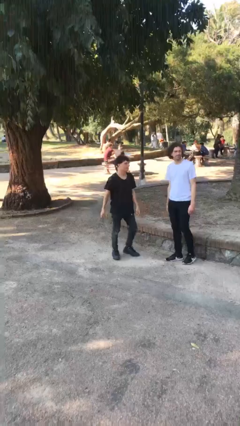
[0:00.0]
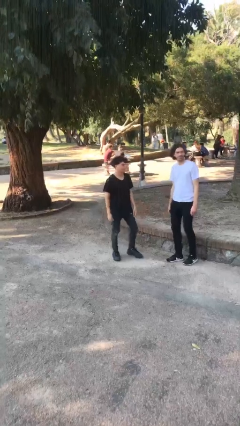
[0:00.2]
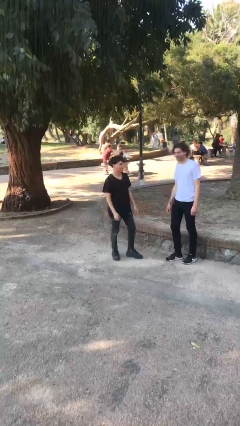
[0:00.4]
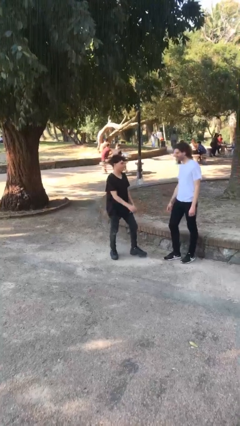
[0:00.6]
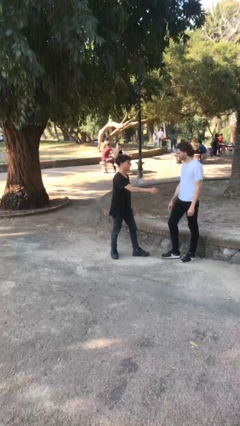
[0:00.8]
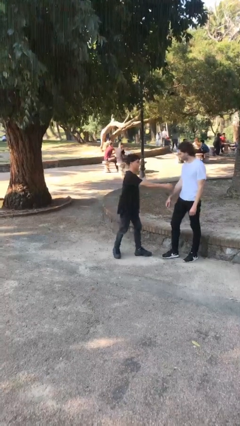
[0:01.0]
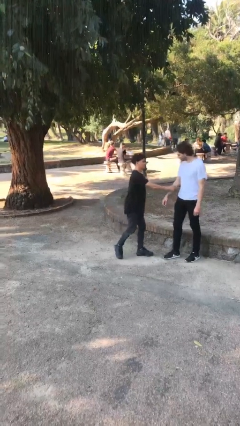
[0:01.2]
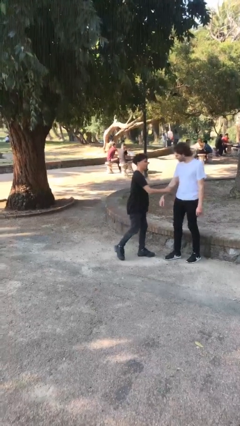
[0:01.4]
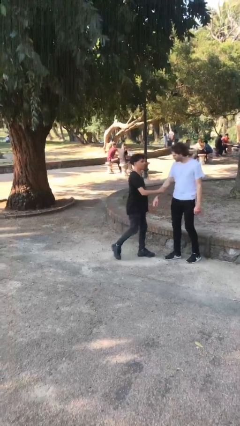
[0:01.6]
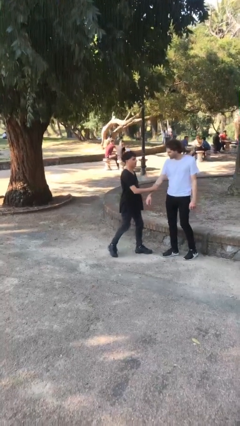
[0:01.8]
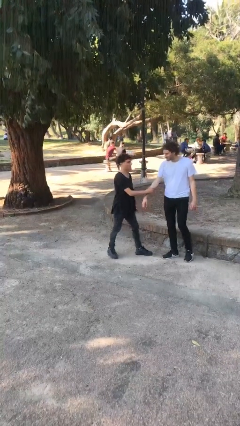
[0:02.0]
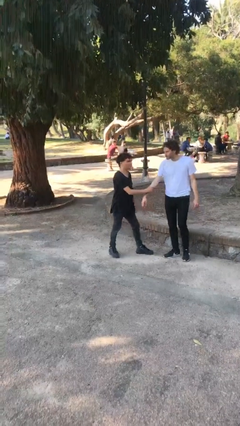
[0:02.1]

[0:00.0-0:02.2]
person grabs person by forearm

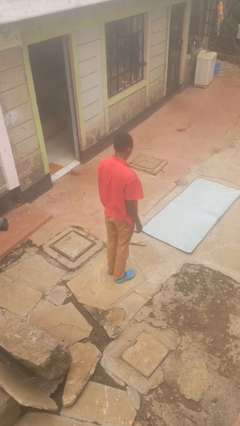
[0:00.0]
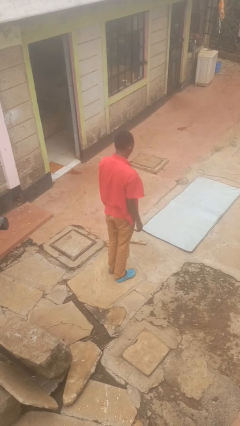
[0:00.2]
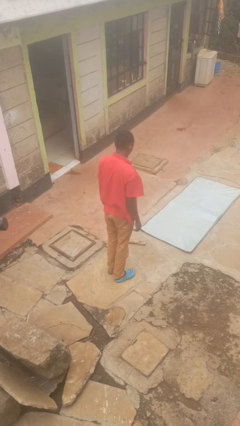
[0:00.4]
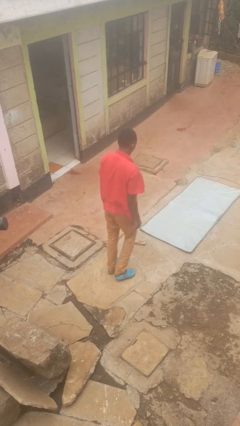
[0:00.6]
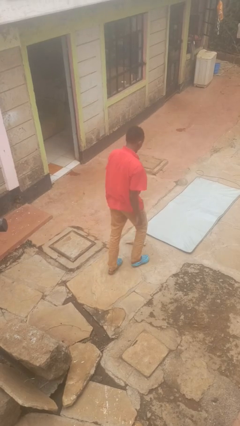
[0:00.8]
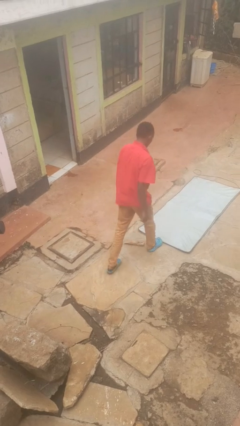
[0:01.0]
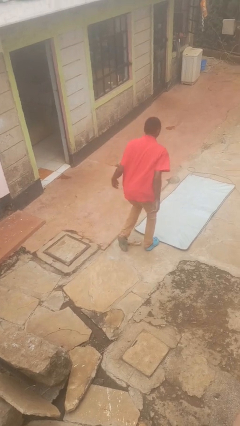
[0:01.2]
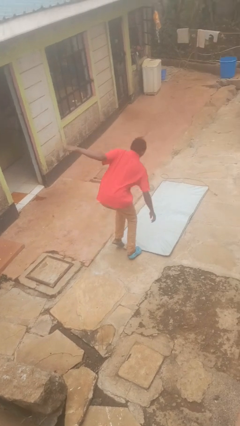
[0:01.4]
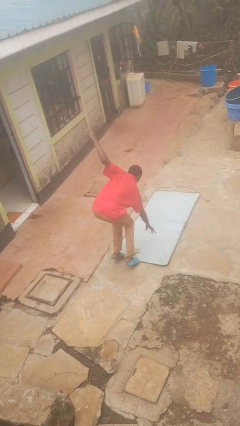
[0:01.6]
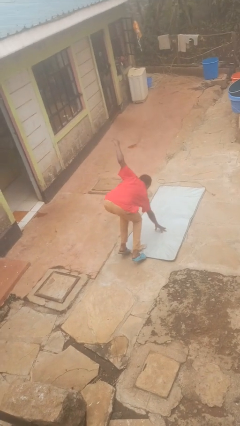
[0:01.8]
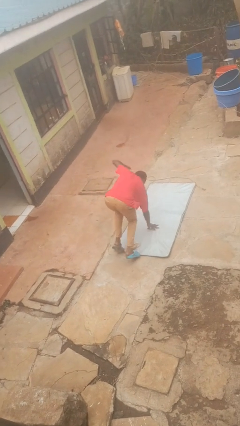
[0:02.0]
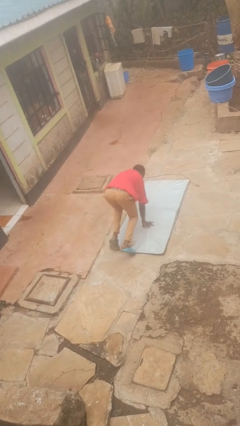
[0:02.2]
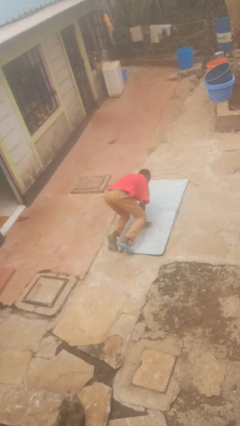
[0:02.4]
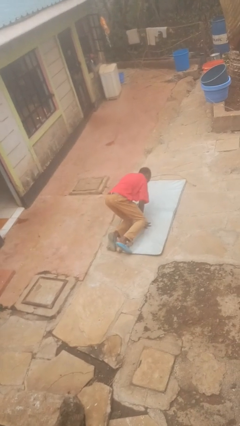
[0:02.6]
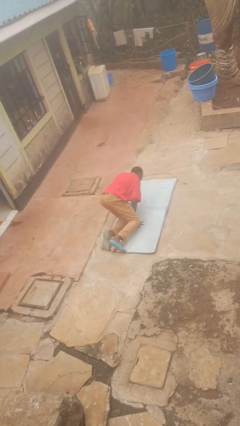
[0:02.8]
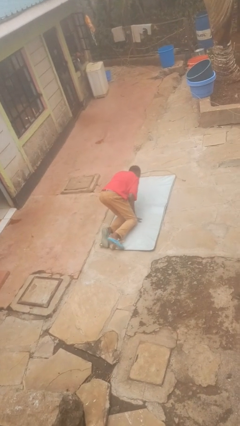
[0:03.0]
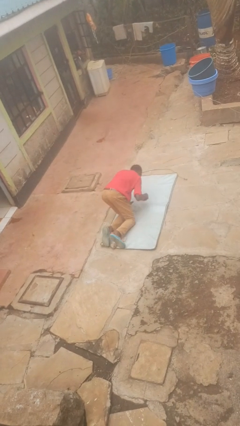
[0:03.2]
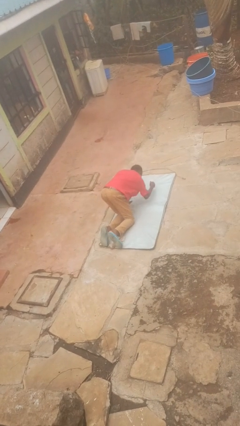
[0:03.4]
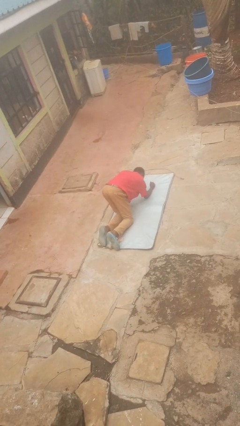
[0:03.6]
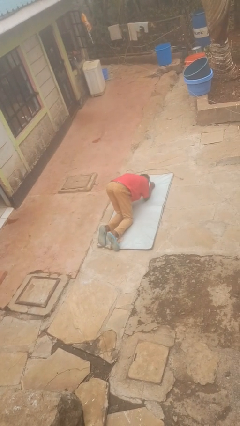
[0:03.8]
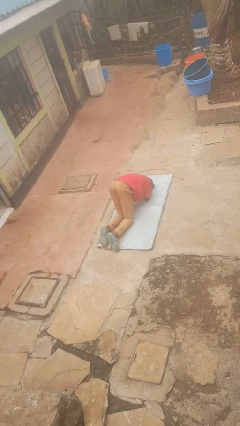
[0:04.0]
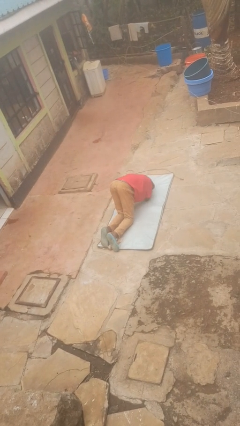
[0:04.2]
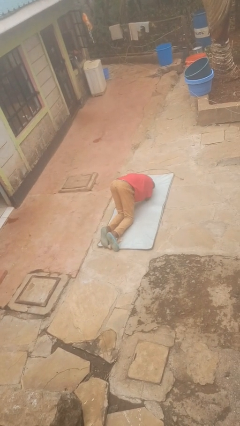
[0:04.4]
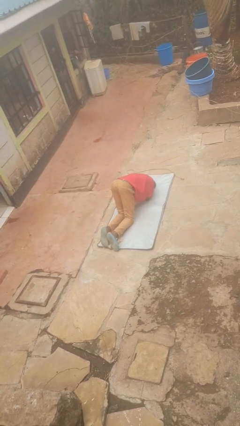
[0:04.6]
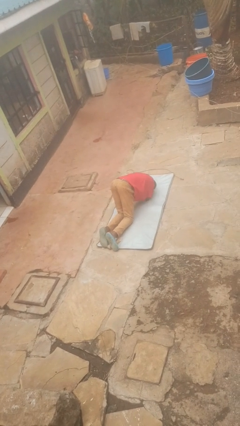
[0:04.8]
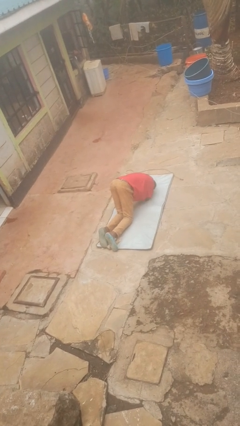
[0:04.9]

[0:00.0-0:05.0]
person trips on object on floor

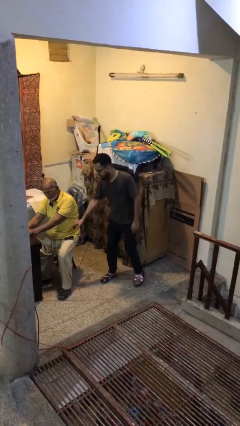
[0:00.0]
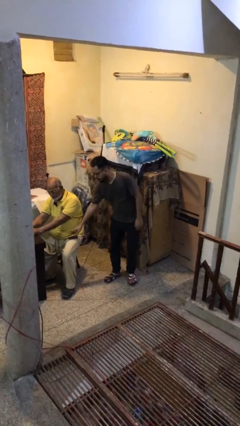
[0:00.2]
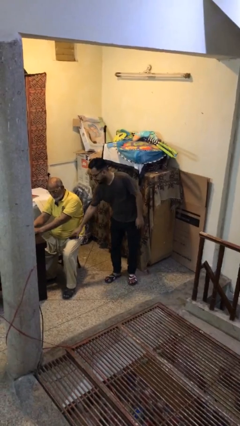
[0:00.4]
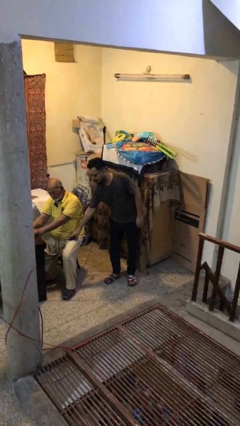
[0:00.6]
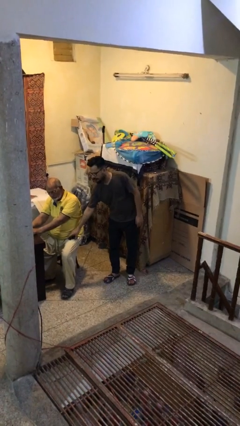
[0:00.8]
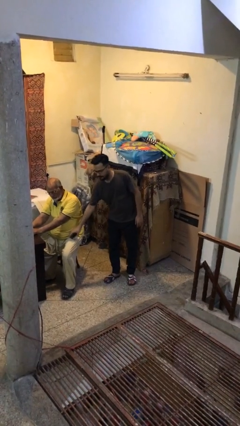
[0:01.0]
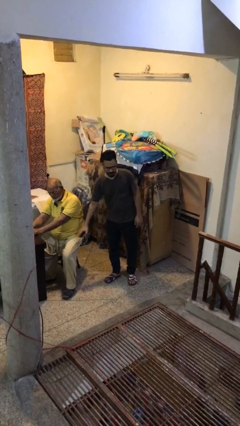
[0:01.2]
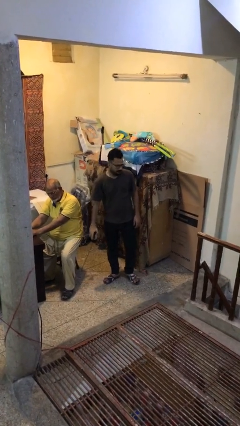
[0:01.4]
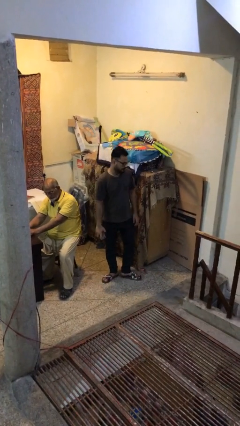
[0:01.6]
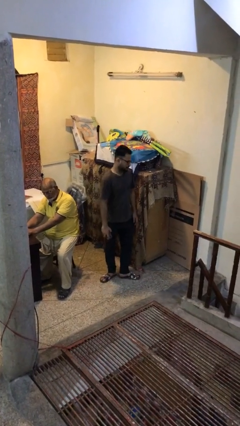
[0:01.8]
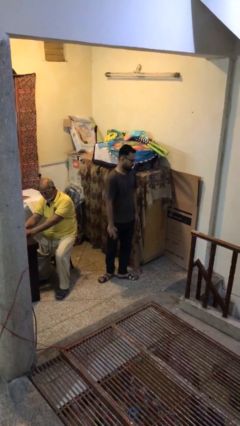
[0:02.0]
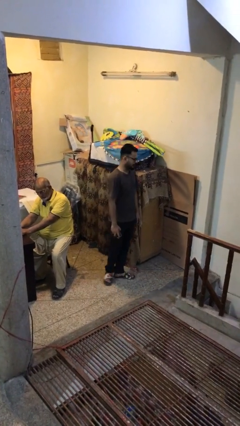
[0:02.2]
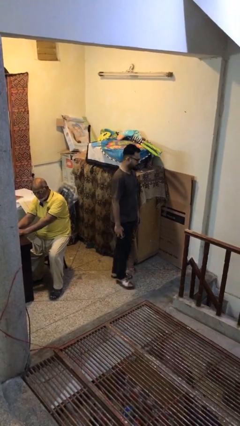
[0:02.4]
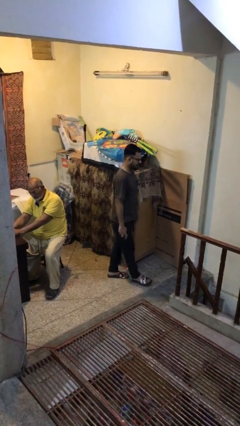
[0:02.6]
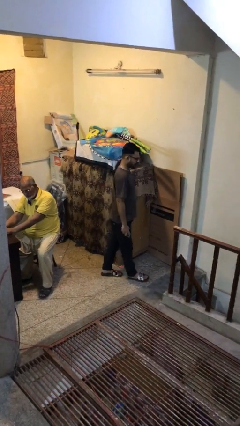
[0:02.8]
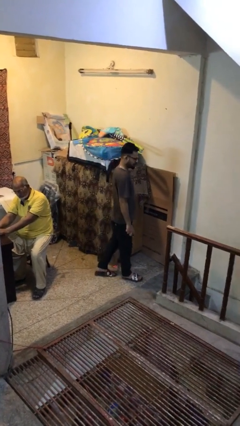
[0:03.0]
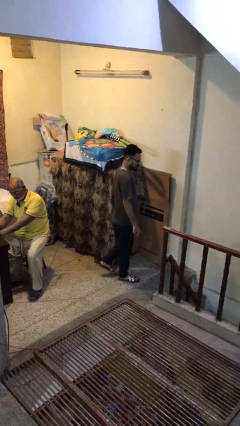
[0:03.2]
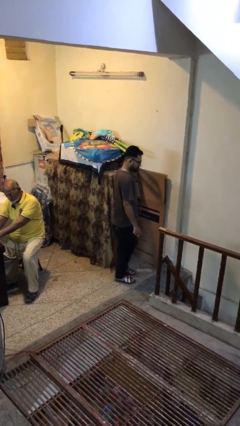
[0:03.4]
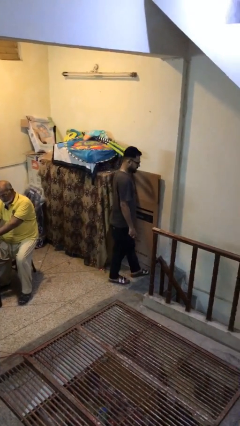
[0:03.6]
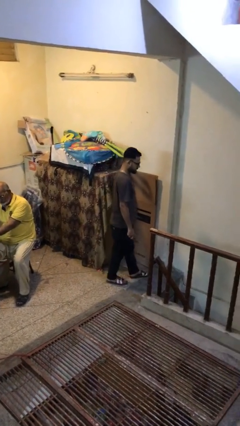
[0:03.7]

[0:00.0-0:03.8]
person steals object from person

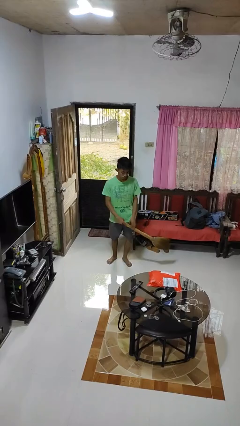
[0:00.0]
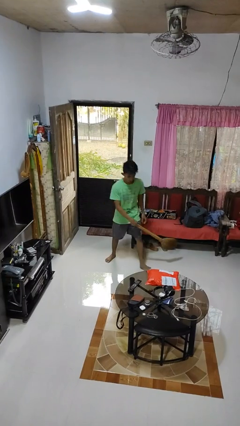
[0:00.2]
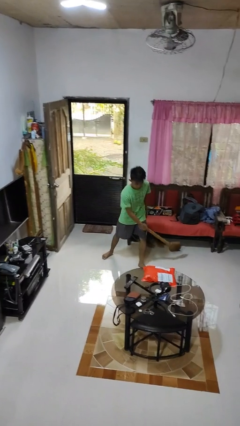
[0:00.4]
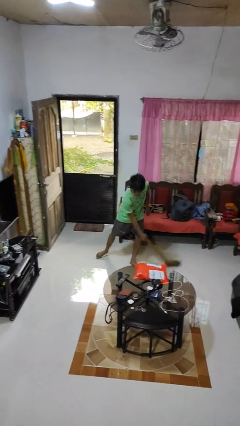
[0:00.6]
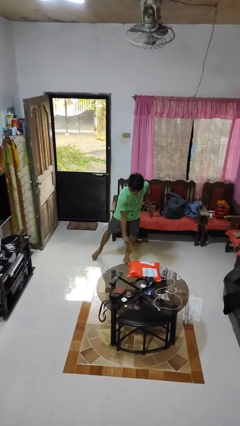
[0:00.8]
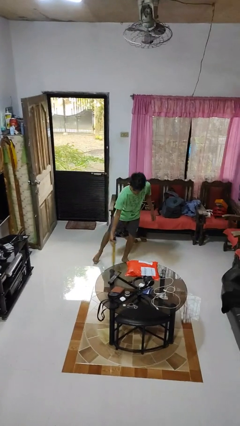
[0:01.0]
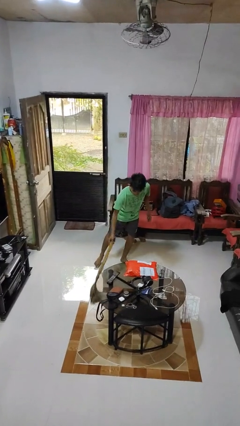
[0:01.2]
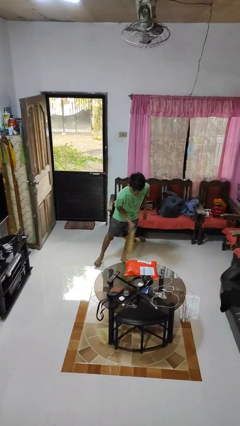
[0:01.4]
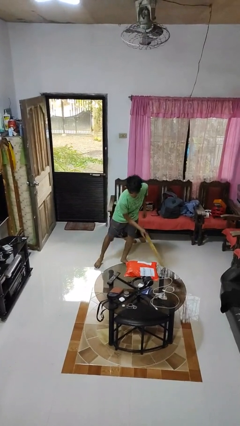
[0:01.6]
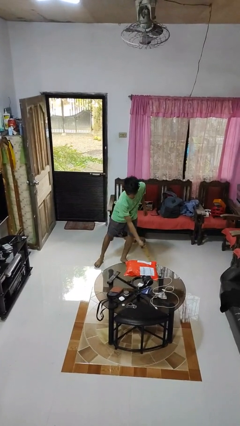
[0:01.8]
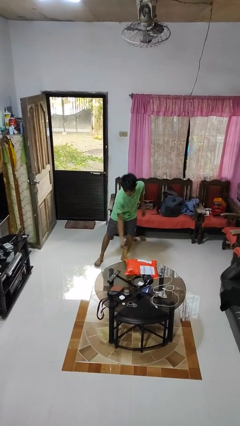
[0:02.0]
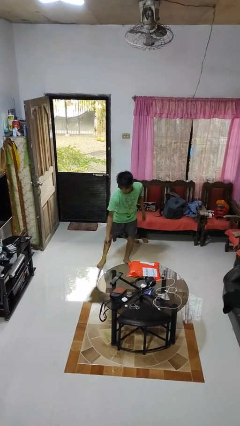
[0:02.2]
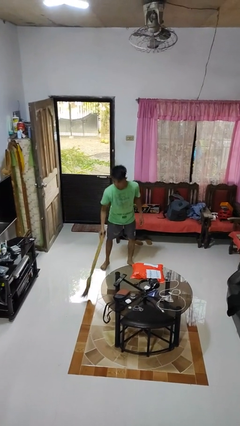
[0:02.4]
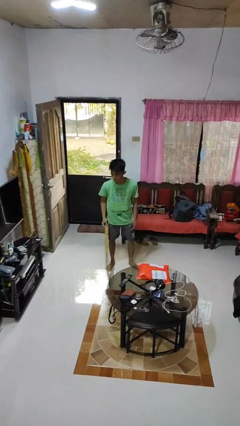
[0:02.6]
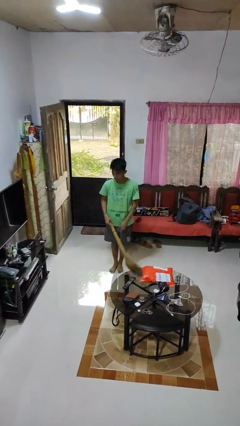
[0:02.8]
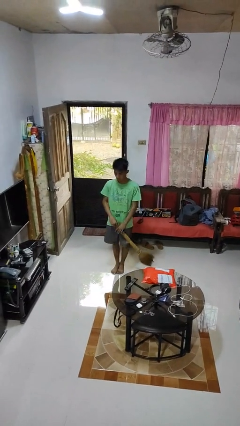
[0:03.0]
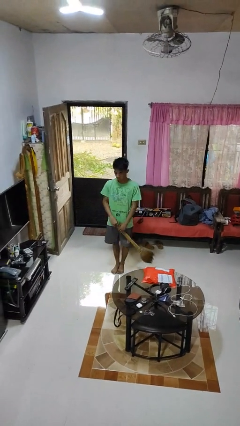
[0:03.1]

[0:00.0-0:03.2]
person sweeps floor

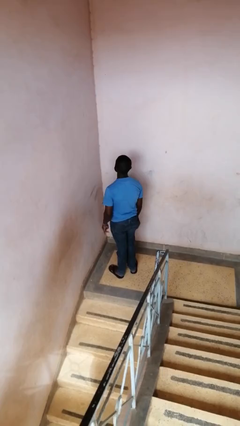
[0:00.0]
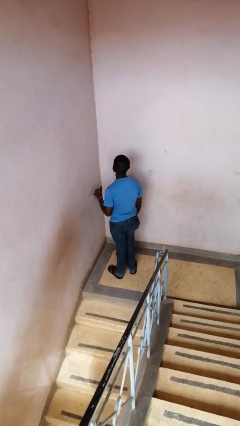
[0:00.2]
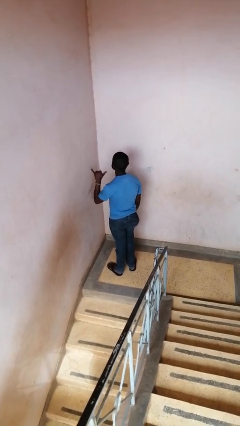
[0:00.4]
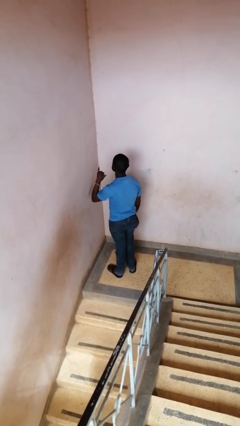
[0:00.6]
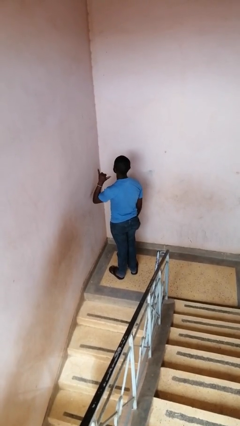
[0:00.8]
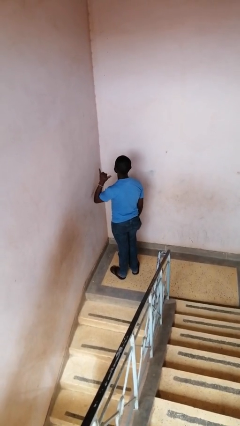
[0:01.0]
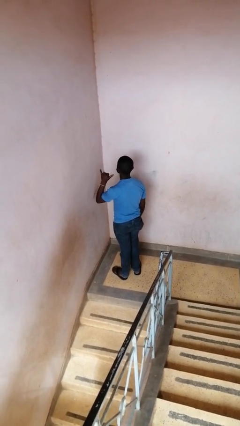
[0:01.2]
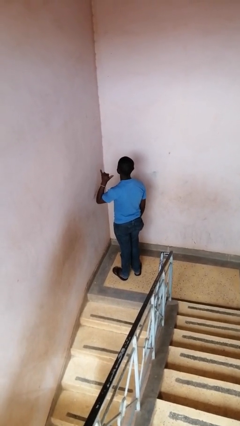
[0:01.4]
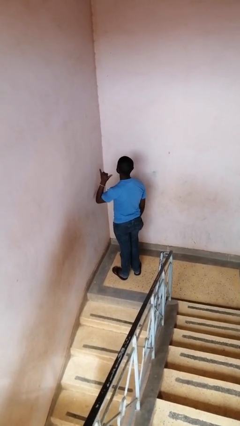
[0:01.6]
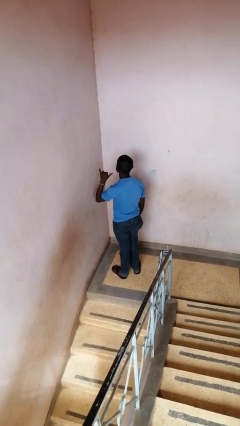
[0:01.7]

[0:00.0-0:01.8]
person gestures hang loose

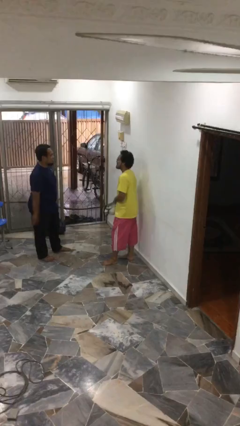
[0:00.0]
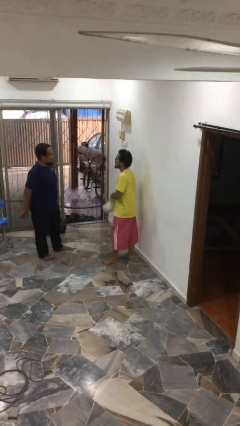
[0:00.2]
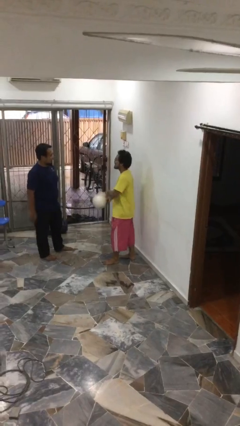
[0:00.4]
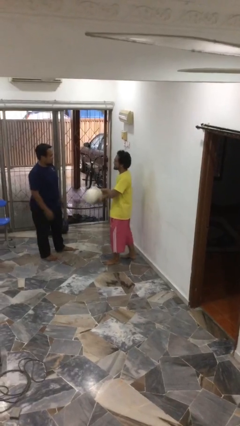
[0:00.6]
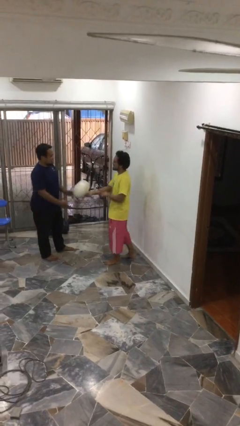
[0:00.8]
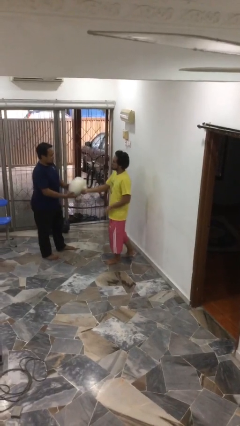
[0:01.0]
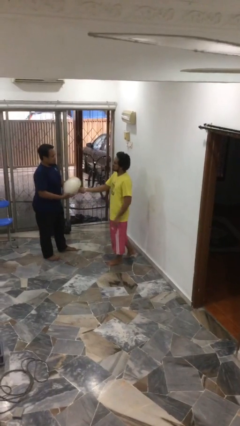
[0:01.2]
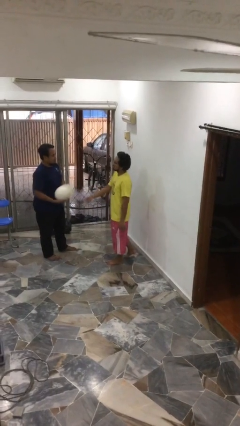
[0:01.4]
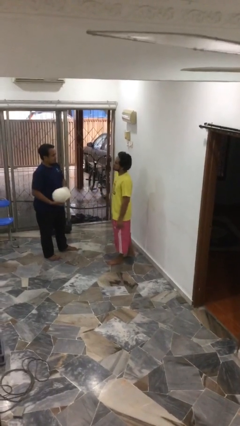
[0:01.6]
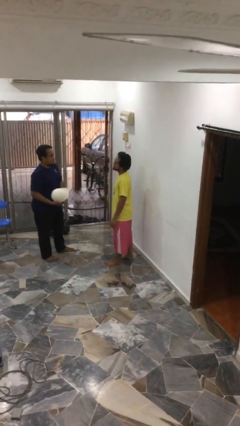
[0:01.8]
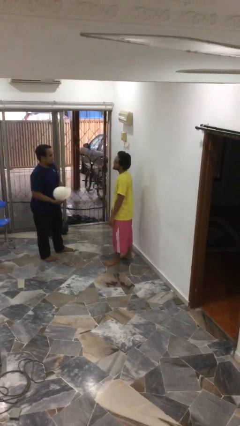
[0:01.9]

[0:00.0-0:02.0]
person transfers object to person
